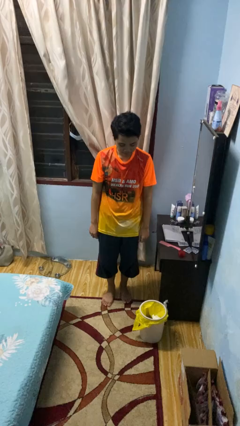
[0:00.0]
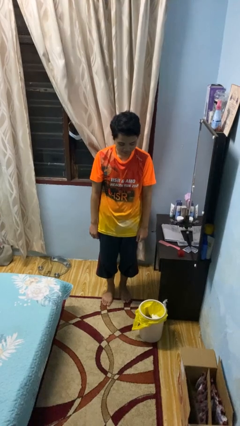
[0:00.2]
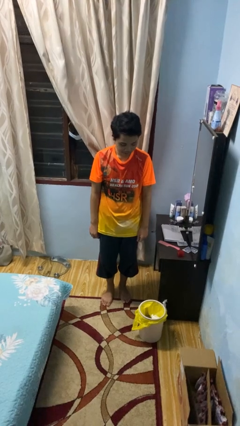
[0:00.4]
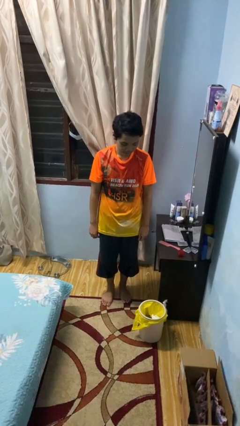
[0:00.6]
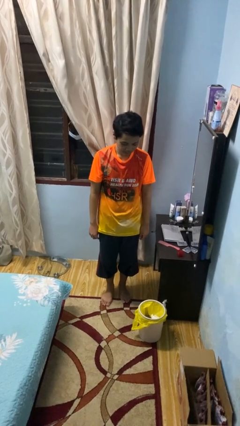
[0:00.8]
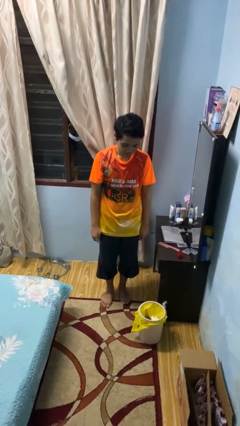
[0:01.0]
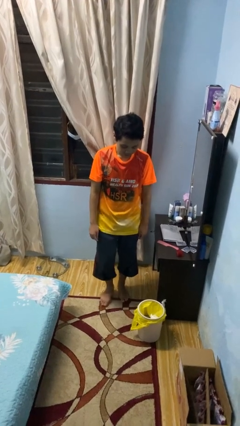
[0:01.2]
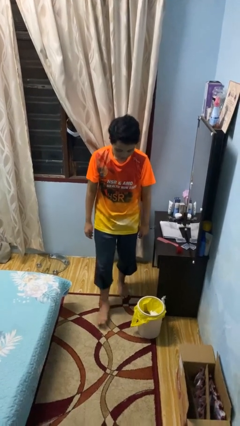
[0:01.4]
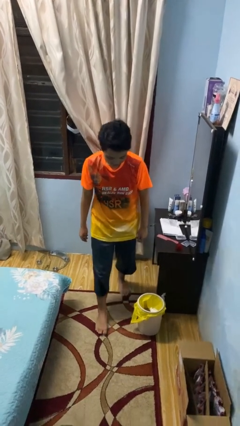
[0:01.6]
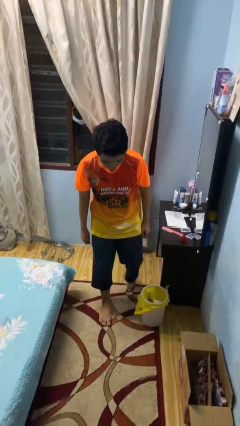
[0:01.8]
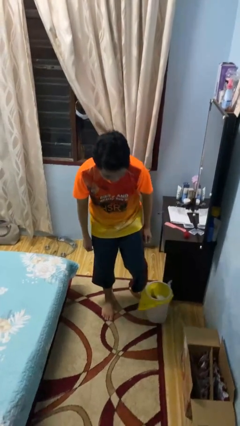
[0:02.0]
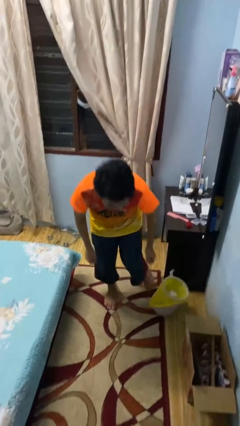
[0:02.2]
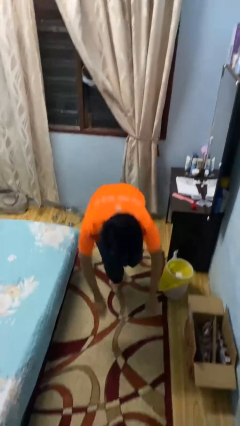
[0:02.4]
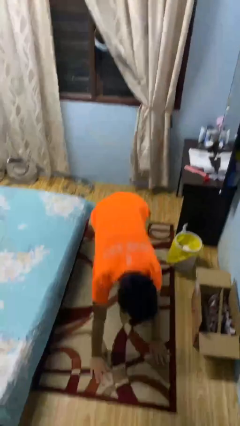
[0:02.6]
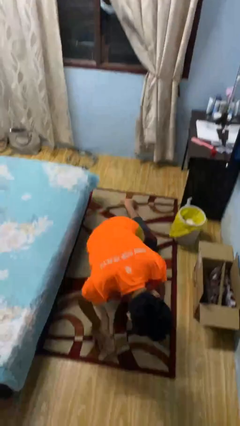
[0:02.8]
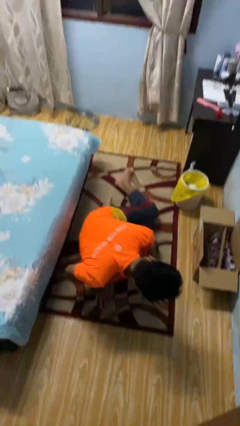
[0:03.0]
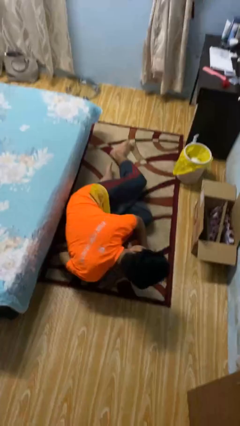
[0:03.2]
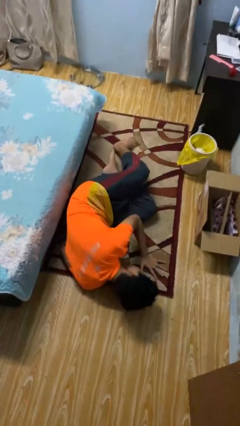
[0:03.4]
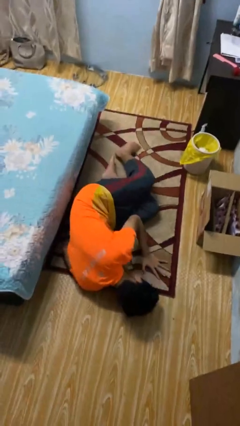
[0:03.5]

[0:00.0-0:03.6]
person trips on object on floor

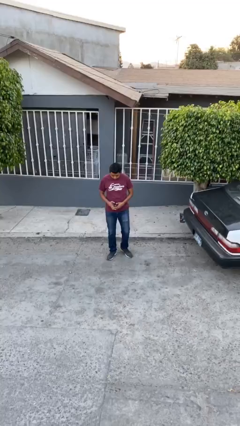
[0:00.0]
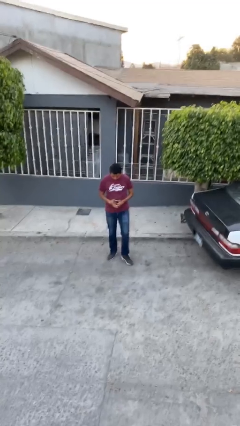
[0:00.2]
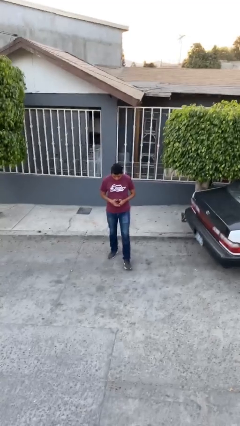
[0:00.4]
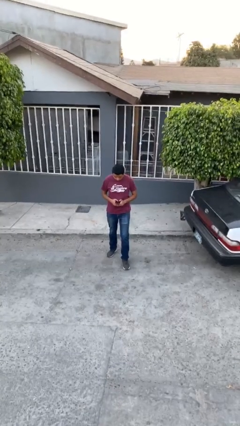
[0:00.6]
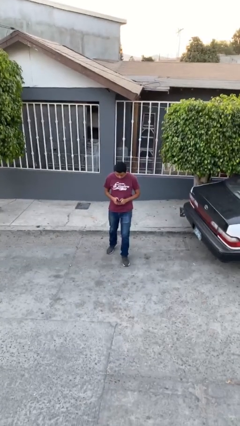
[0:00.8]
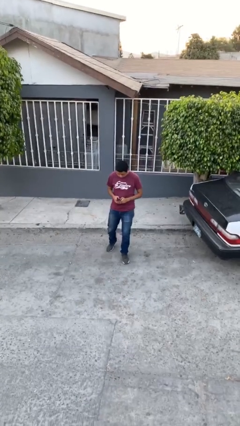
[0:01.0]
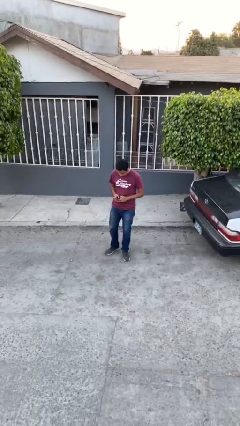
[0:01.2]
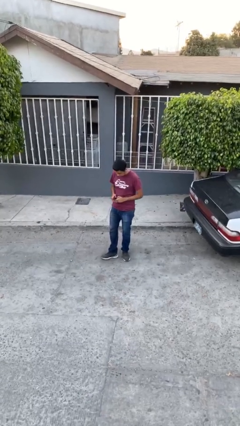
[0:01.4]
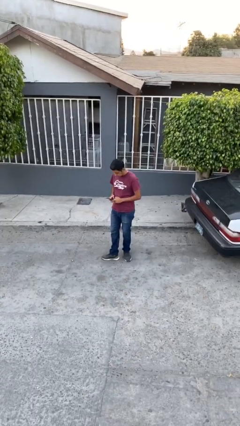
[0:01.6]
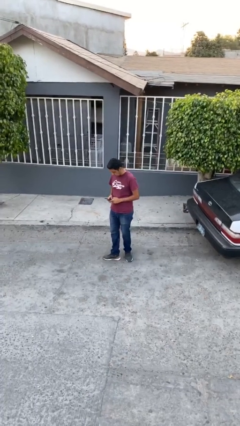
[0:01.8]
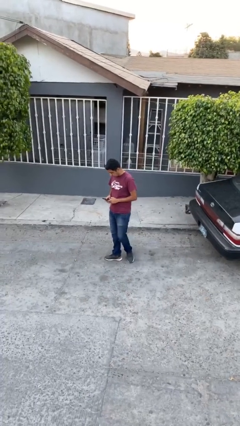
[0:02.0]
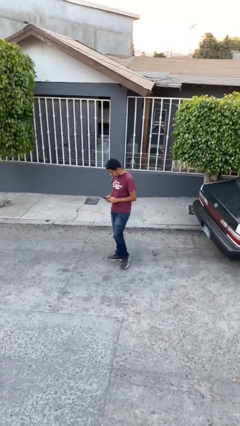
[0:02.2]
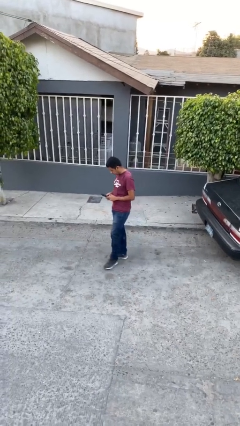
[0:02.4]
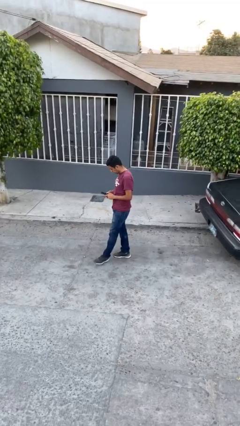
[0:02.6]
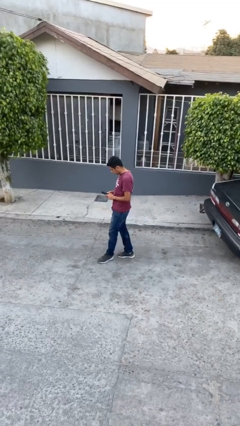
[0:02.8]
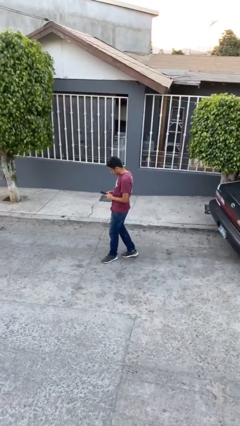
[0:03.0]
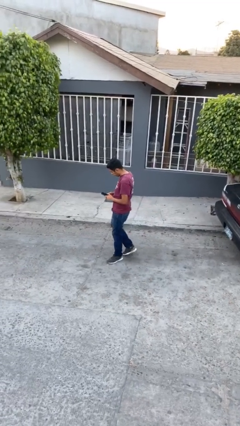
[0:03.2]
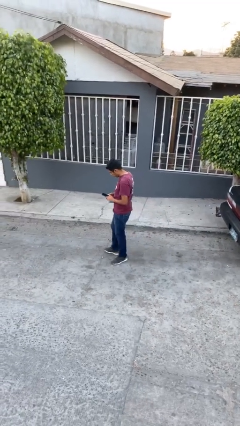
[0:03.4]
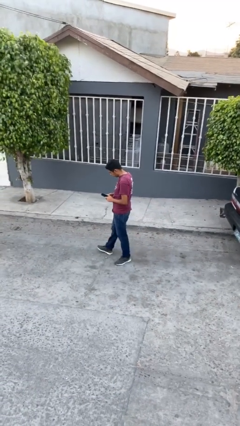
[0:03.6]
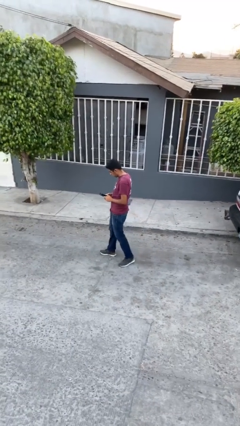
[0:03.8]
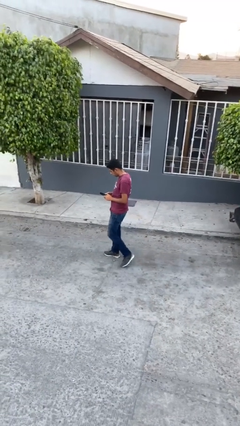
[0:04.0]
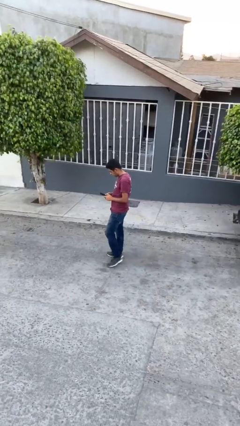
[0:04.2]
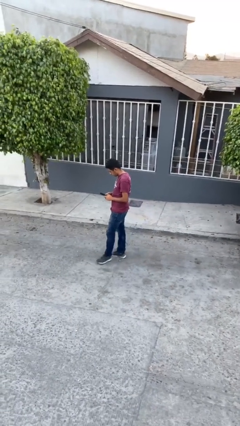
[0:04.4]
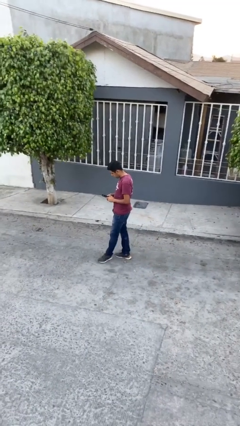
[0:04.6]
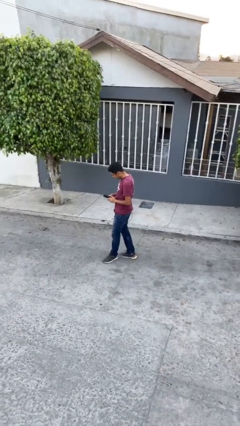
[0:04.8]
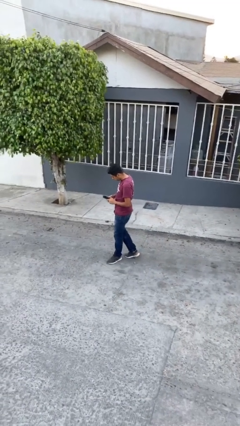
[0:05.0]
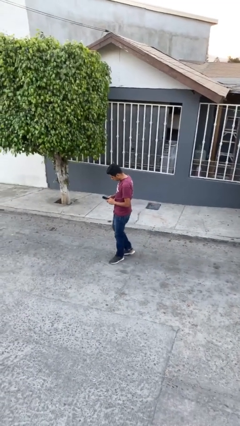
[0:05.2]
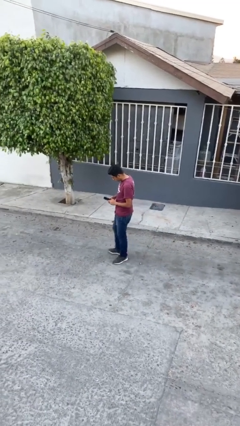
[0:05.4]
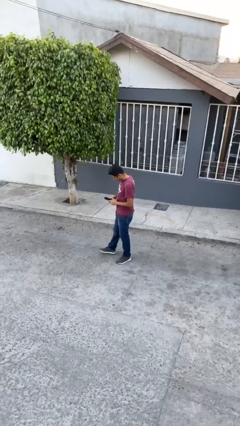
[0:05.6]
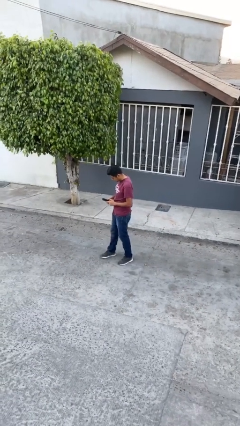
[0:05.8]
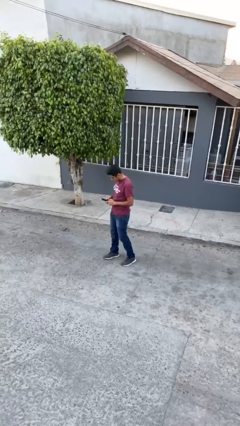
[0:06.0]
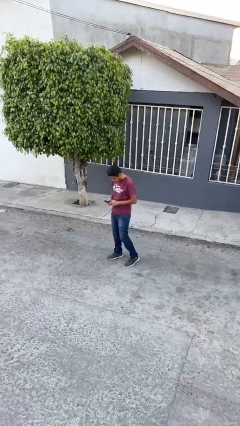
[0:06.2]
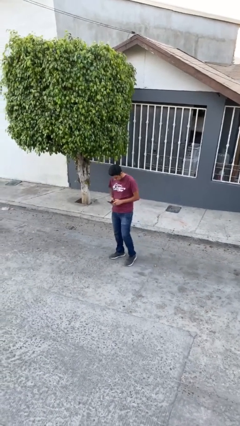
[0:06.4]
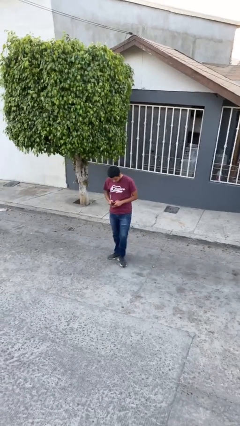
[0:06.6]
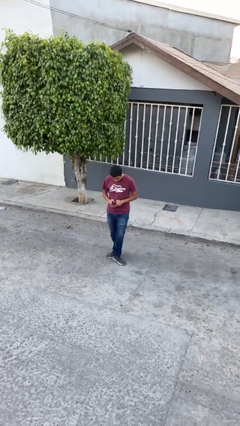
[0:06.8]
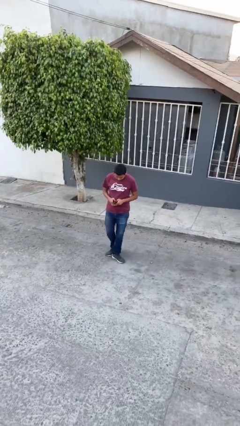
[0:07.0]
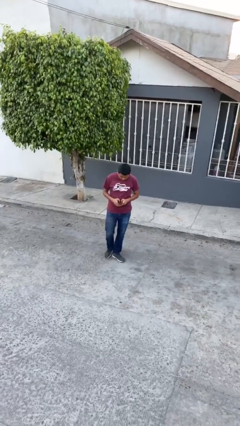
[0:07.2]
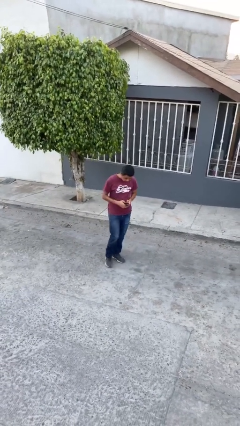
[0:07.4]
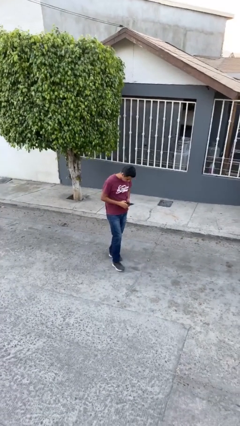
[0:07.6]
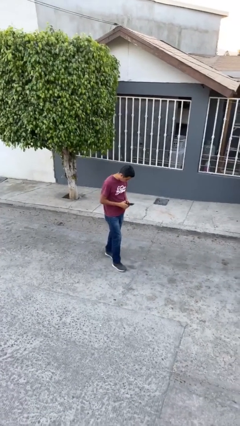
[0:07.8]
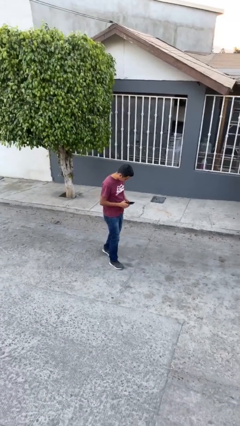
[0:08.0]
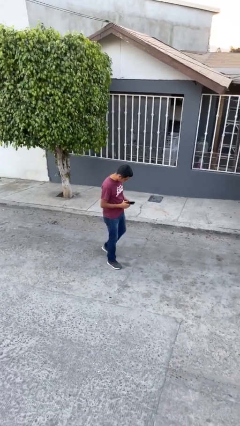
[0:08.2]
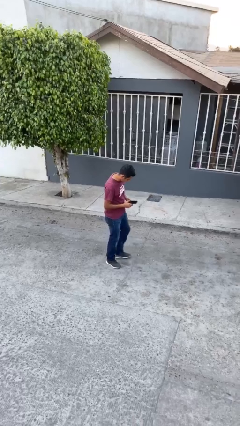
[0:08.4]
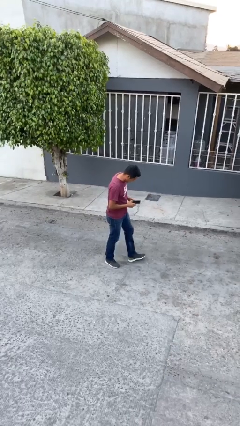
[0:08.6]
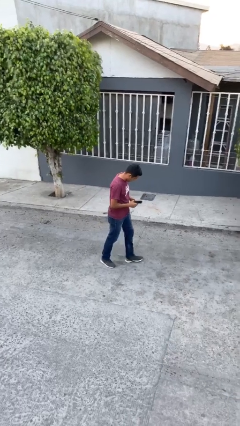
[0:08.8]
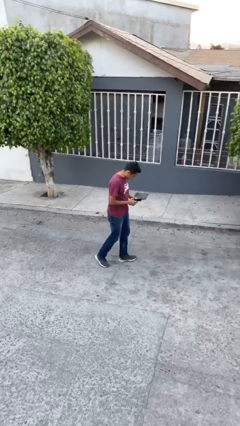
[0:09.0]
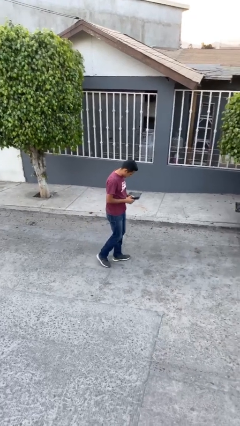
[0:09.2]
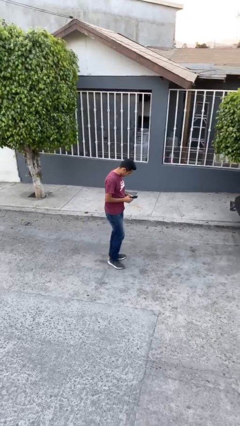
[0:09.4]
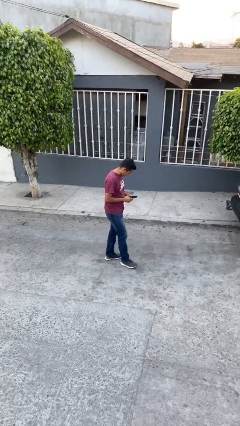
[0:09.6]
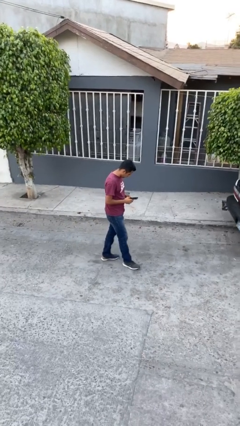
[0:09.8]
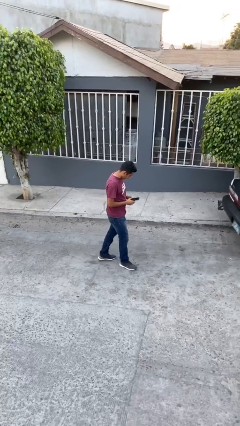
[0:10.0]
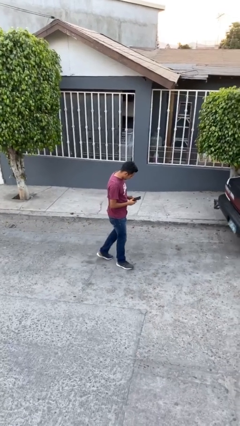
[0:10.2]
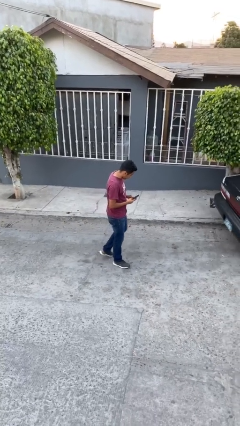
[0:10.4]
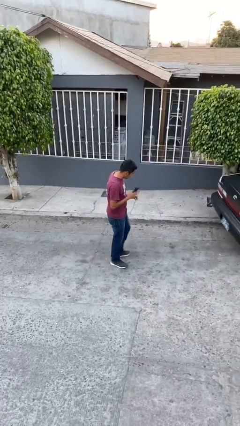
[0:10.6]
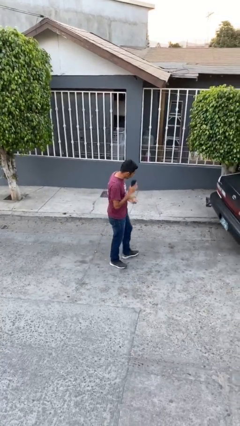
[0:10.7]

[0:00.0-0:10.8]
person texts on phone

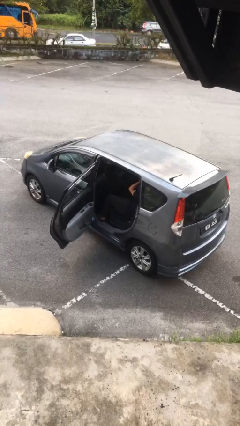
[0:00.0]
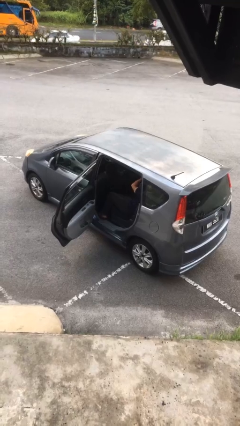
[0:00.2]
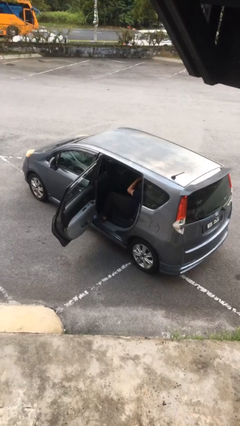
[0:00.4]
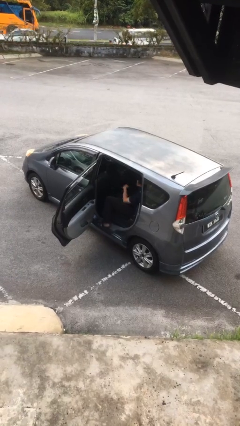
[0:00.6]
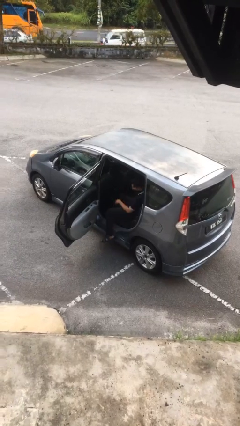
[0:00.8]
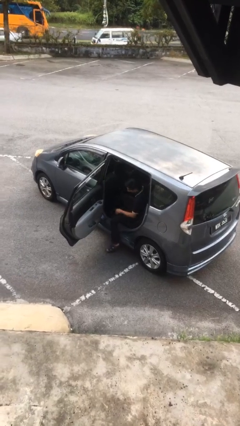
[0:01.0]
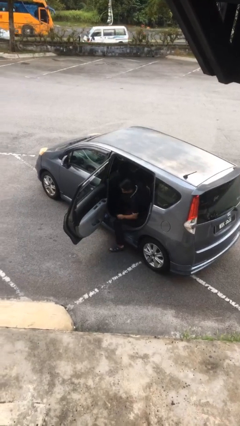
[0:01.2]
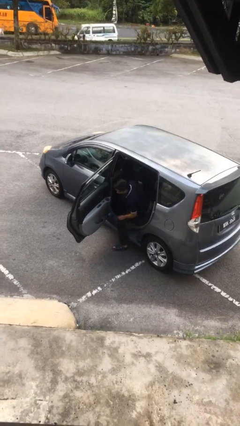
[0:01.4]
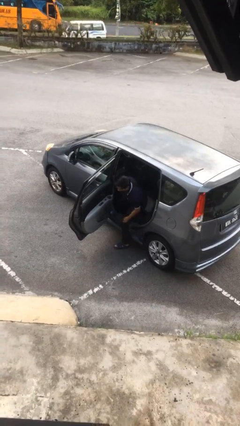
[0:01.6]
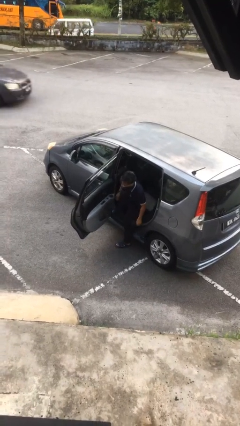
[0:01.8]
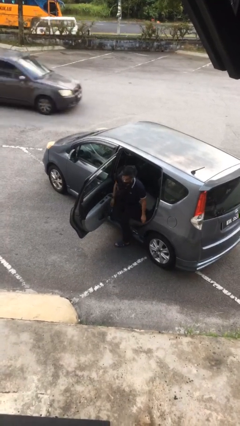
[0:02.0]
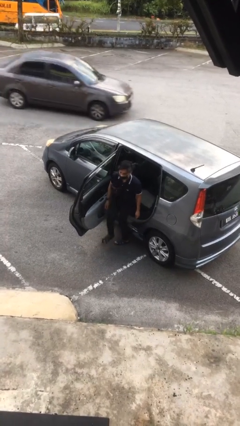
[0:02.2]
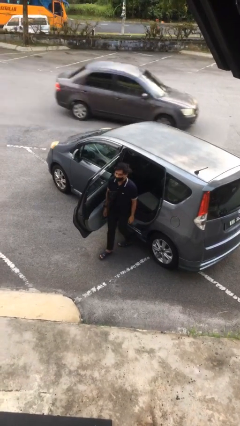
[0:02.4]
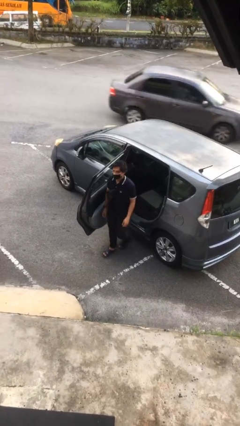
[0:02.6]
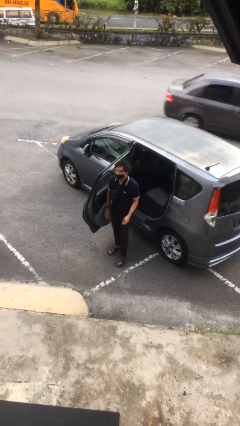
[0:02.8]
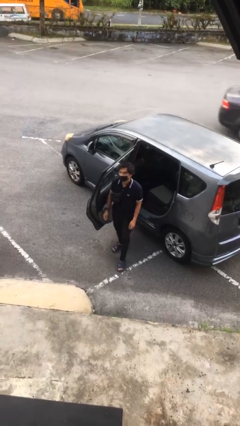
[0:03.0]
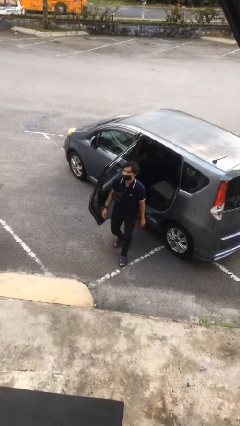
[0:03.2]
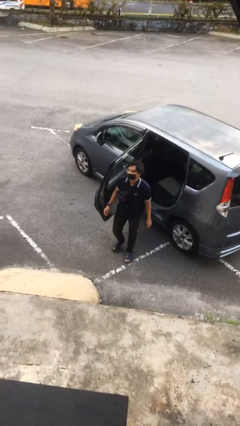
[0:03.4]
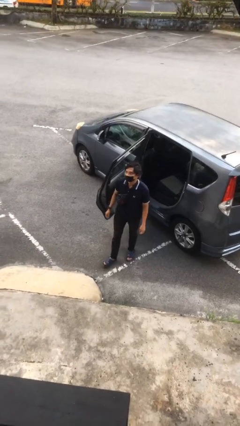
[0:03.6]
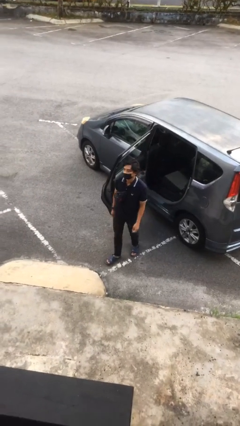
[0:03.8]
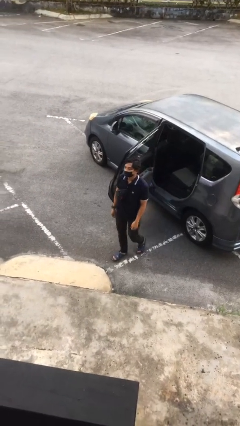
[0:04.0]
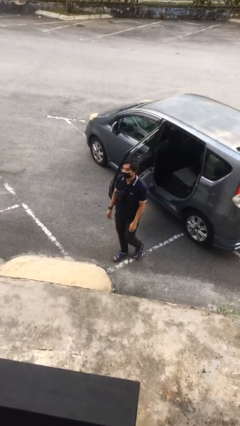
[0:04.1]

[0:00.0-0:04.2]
person exits car
